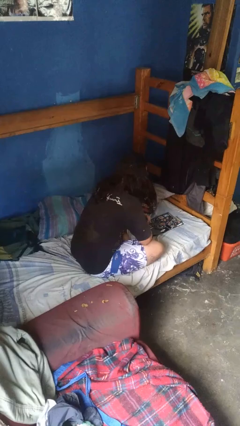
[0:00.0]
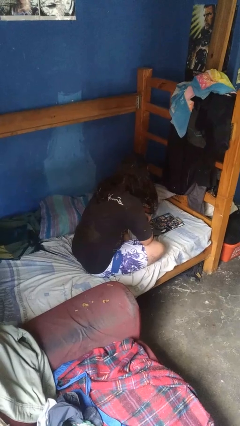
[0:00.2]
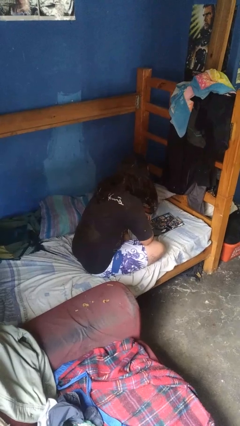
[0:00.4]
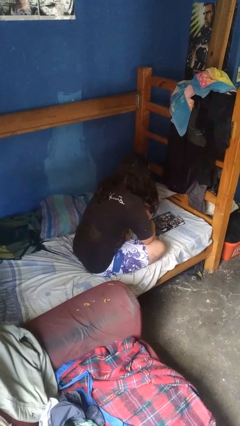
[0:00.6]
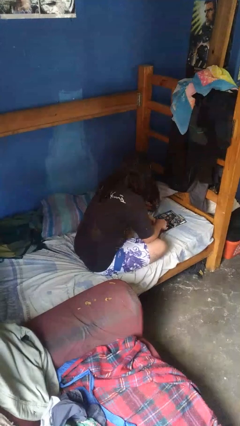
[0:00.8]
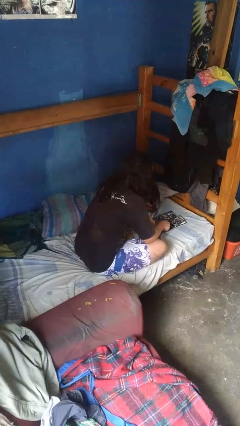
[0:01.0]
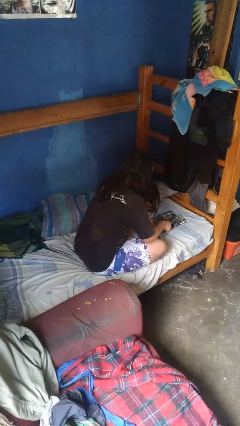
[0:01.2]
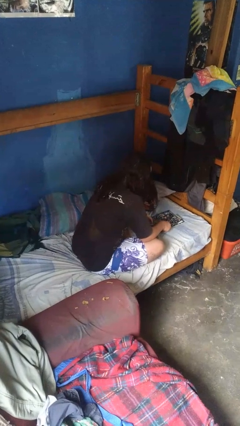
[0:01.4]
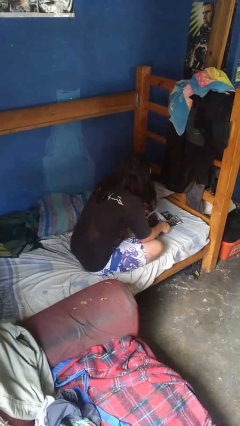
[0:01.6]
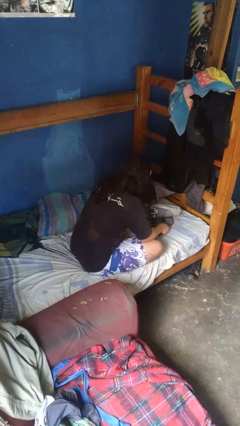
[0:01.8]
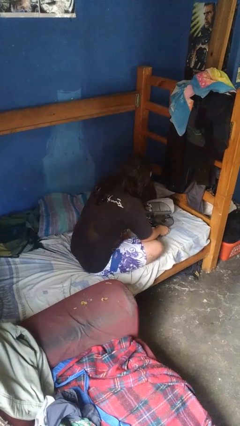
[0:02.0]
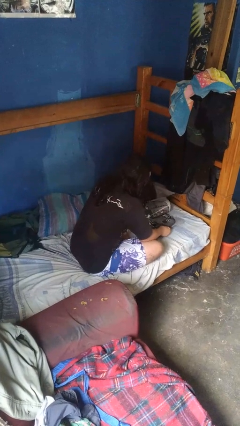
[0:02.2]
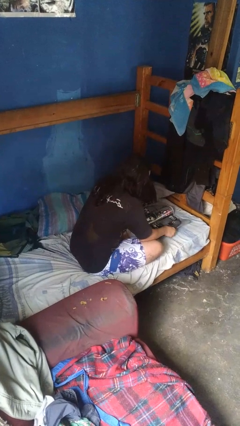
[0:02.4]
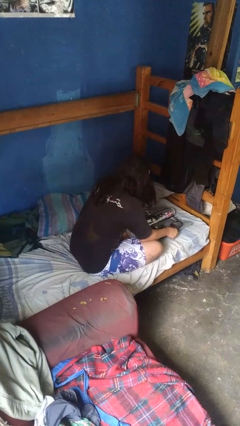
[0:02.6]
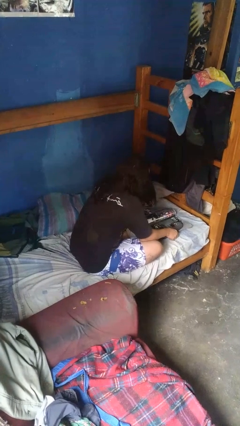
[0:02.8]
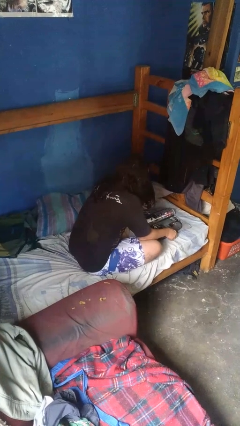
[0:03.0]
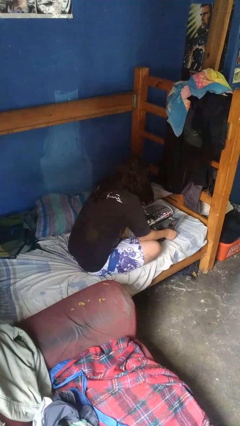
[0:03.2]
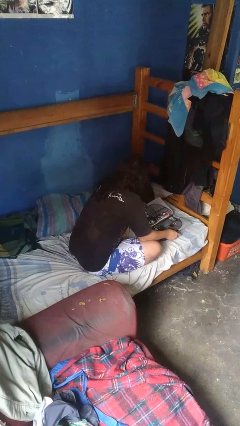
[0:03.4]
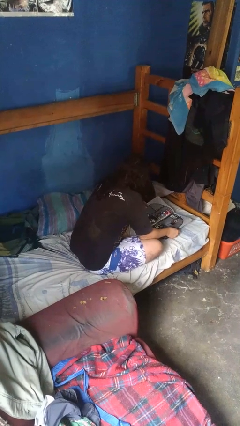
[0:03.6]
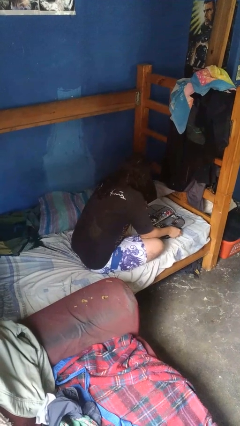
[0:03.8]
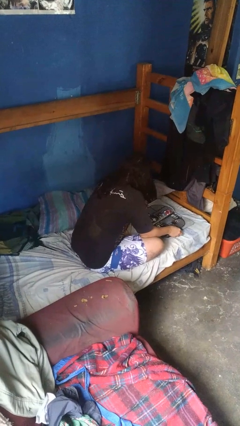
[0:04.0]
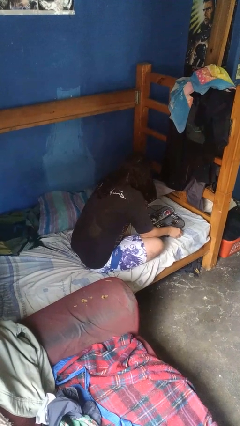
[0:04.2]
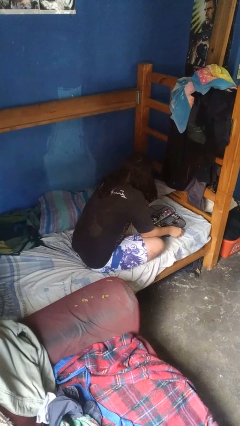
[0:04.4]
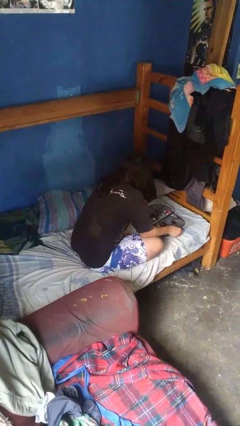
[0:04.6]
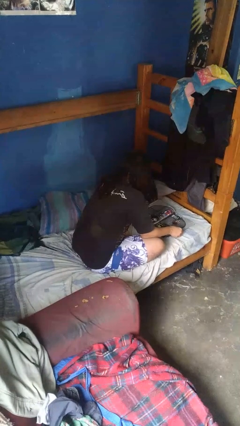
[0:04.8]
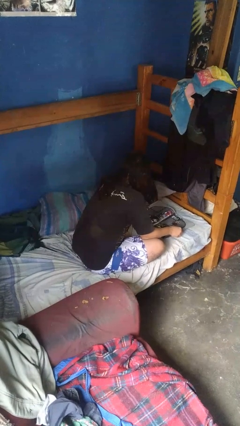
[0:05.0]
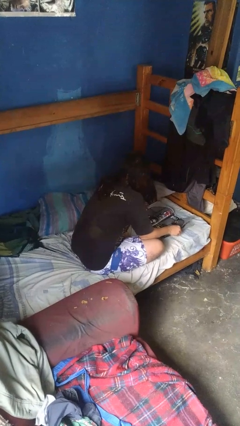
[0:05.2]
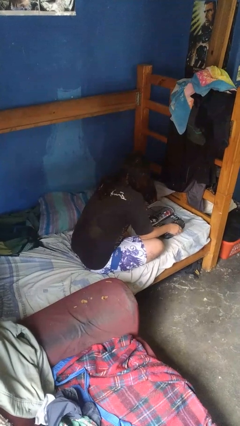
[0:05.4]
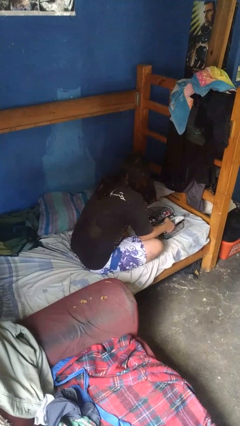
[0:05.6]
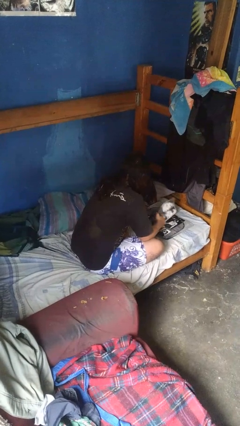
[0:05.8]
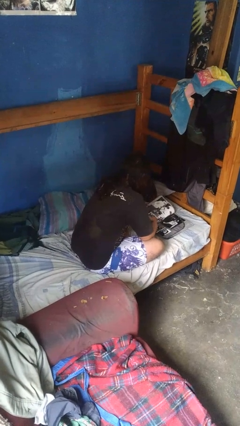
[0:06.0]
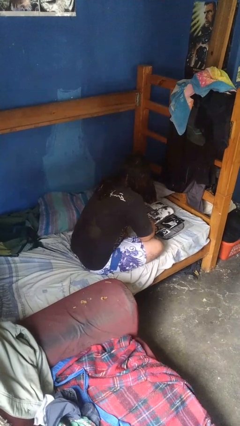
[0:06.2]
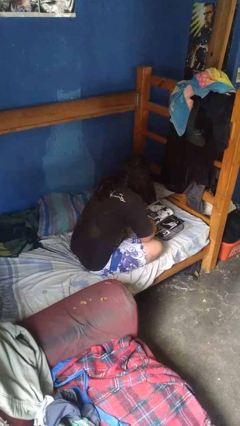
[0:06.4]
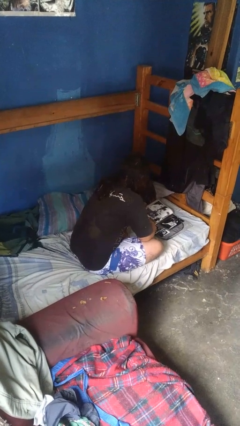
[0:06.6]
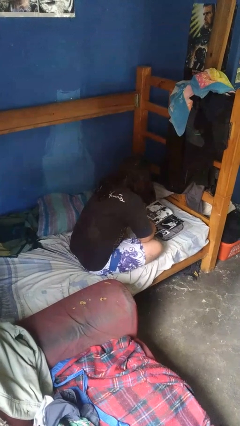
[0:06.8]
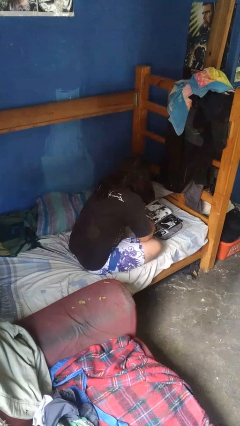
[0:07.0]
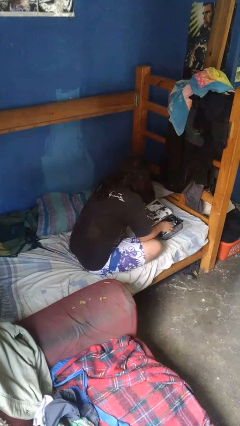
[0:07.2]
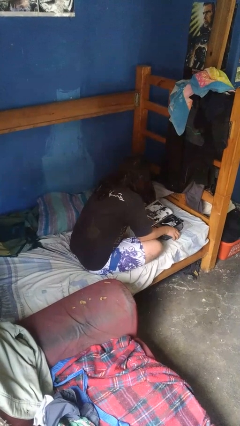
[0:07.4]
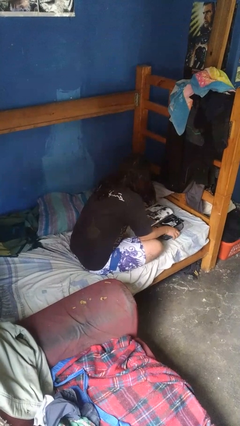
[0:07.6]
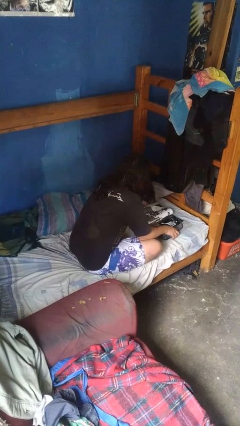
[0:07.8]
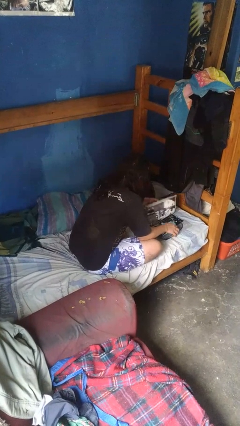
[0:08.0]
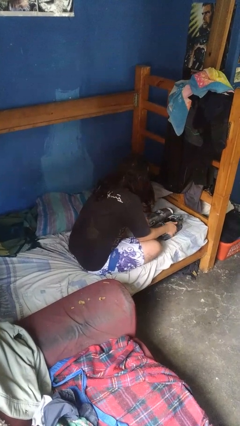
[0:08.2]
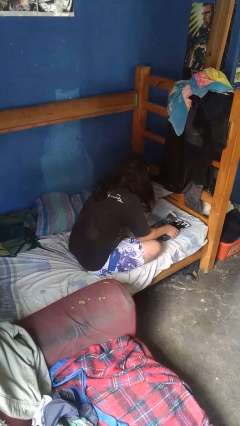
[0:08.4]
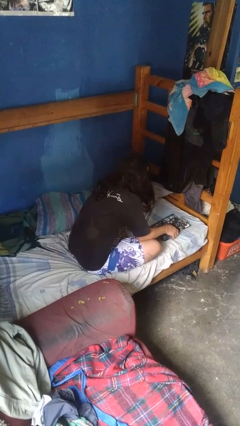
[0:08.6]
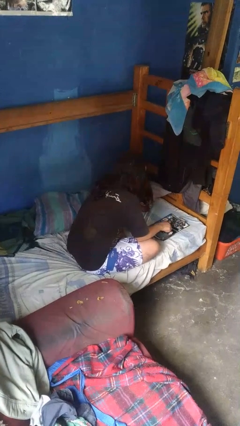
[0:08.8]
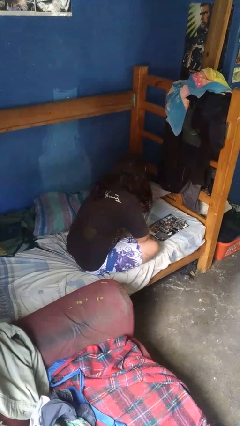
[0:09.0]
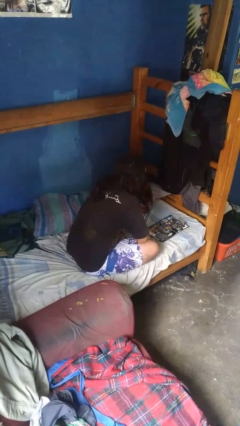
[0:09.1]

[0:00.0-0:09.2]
person reads magazine

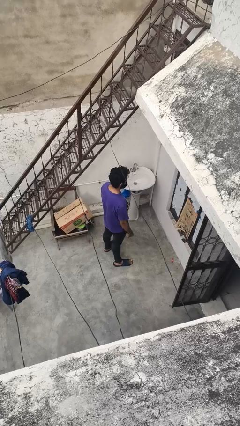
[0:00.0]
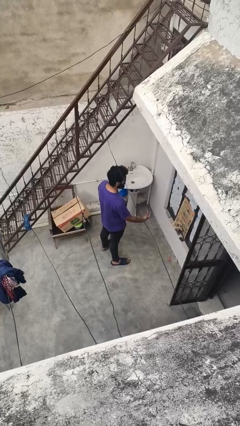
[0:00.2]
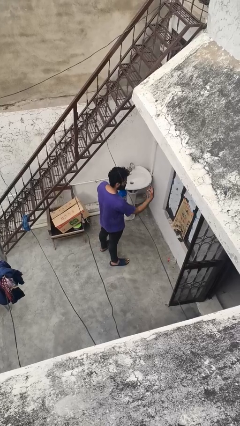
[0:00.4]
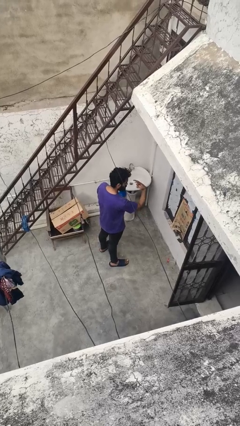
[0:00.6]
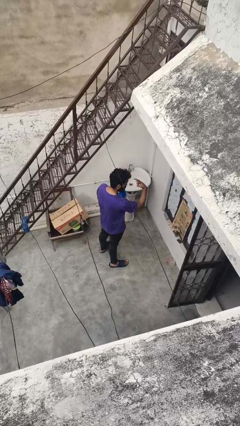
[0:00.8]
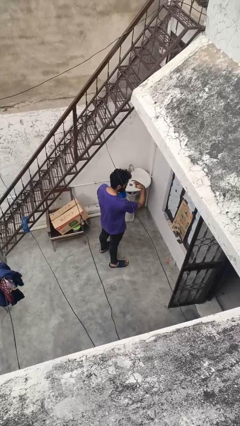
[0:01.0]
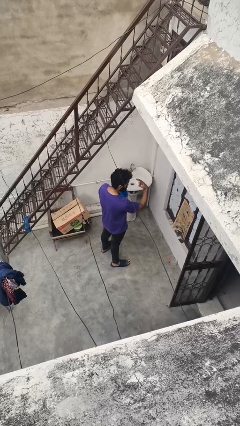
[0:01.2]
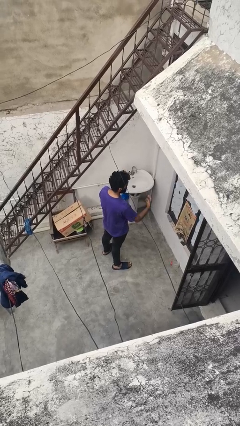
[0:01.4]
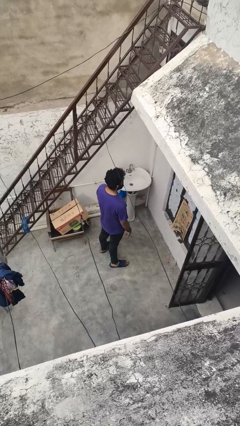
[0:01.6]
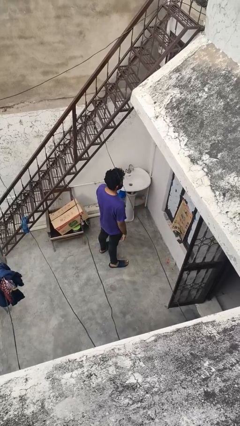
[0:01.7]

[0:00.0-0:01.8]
person gestures watch closely

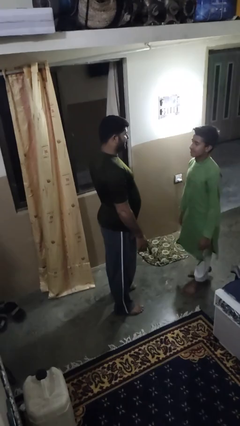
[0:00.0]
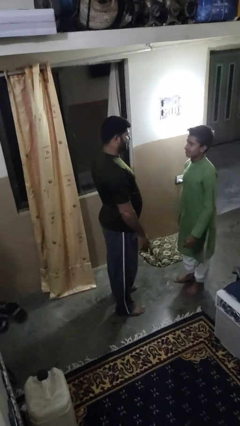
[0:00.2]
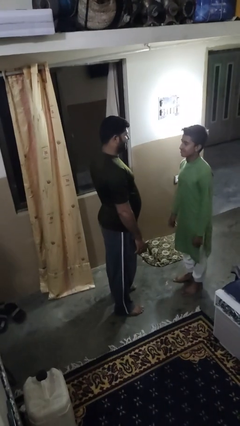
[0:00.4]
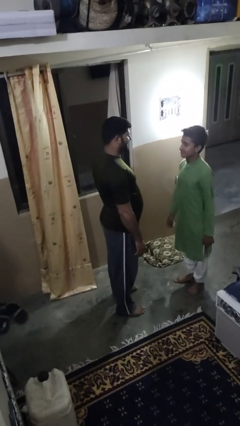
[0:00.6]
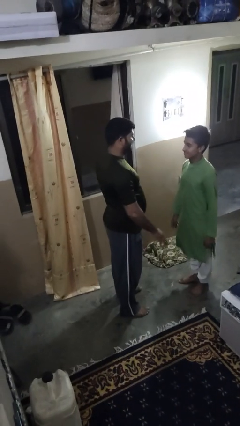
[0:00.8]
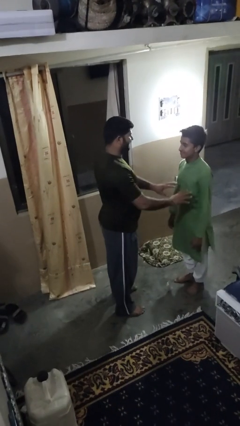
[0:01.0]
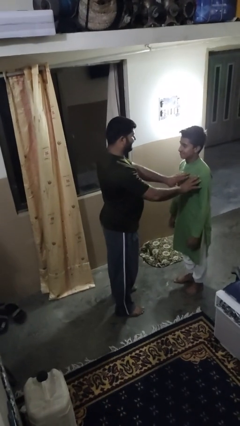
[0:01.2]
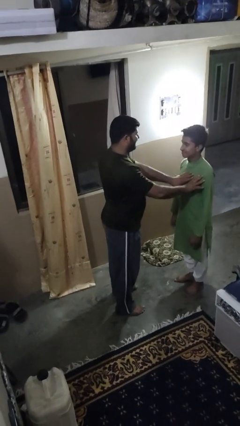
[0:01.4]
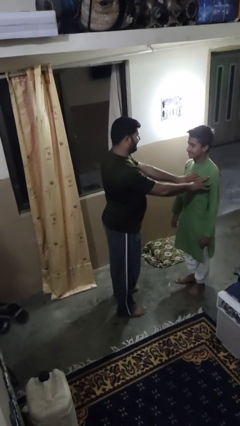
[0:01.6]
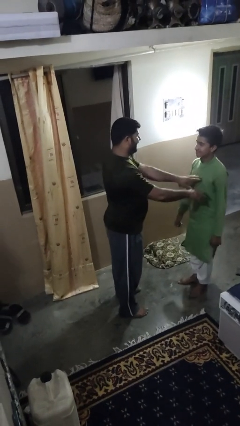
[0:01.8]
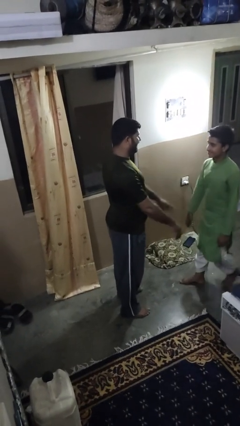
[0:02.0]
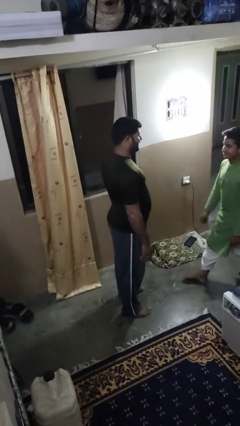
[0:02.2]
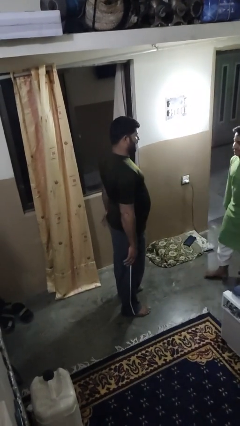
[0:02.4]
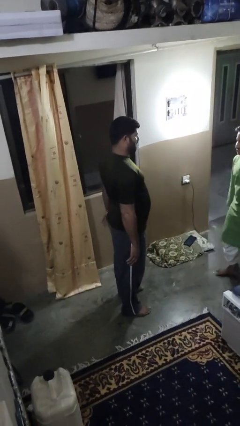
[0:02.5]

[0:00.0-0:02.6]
person shoves person

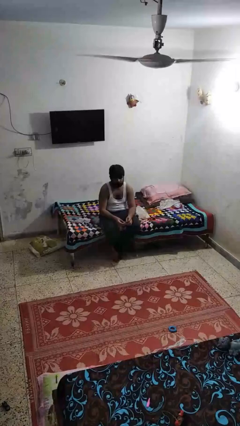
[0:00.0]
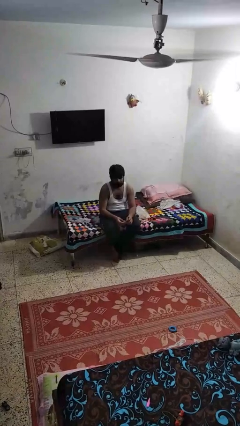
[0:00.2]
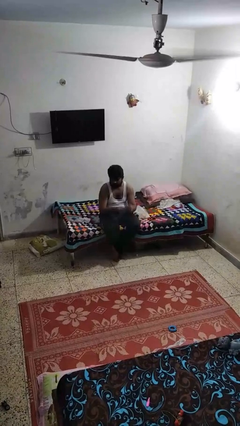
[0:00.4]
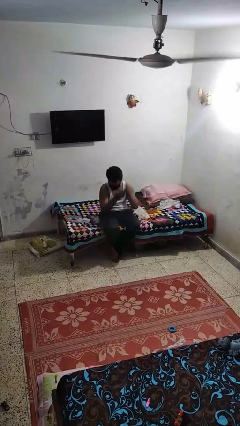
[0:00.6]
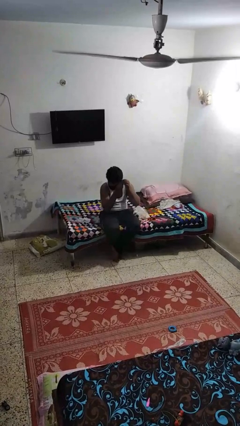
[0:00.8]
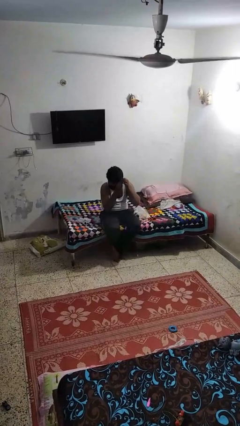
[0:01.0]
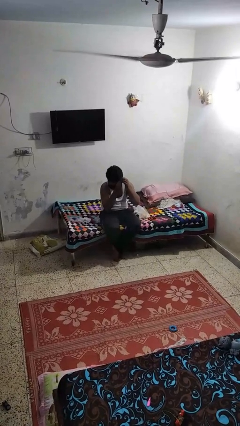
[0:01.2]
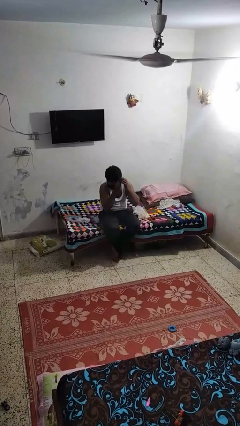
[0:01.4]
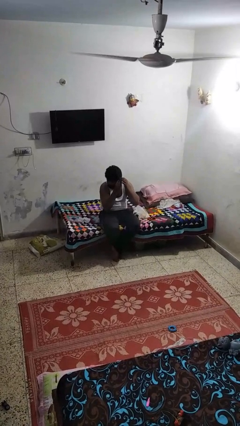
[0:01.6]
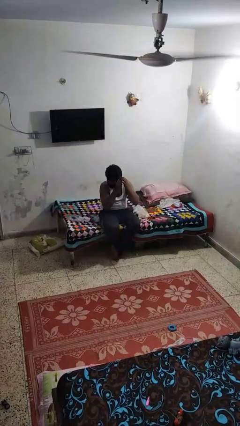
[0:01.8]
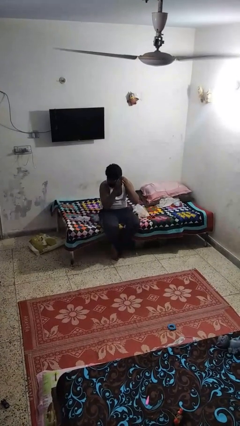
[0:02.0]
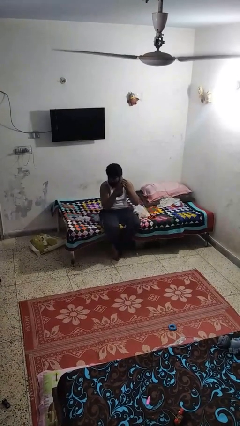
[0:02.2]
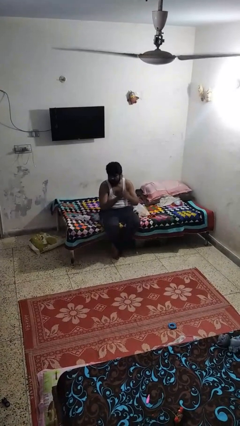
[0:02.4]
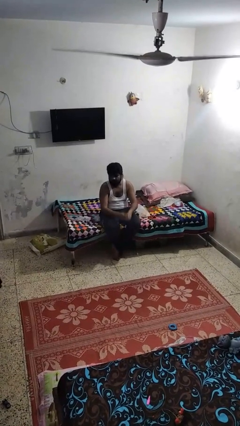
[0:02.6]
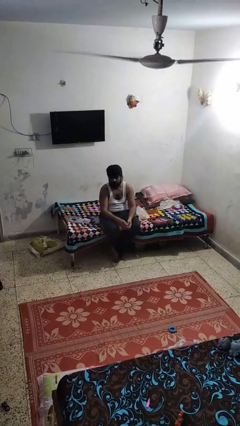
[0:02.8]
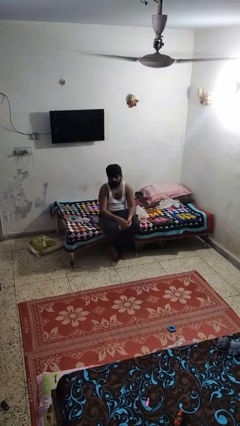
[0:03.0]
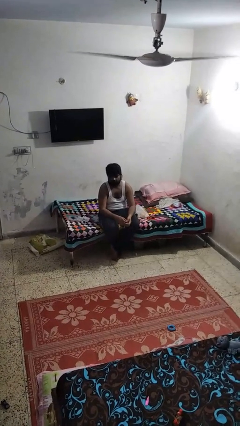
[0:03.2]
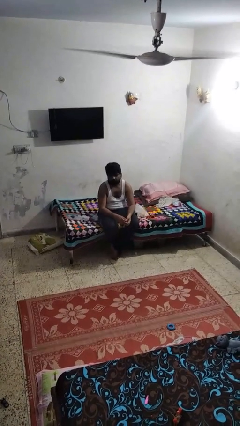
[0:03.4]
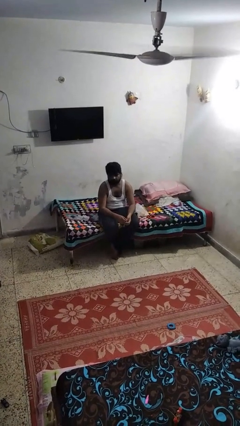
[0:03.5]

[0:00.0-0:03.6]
person puts on earrings

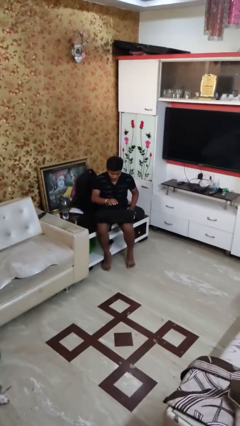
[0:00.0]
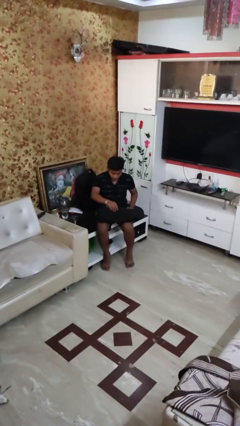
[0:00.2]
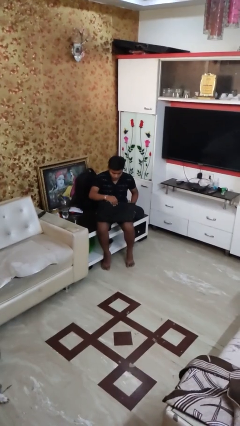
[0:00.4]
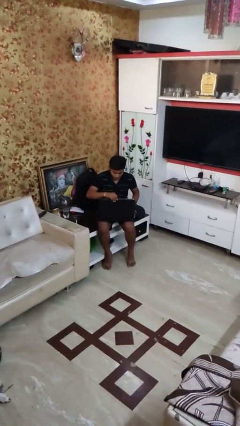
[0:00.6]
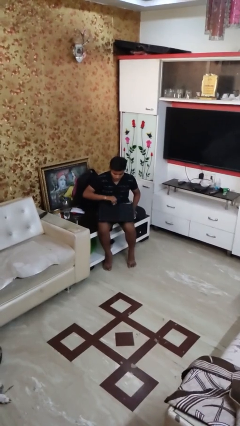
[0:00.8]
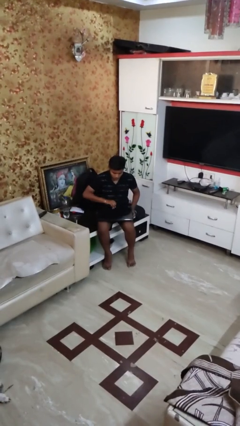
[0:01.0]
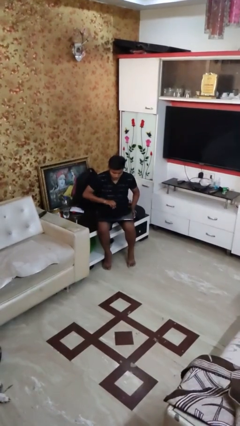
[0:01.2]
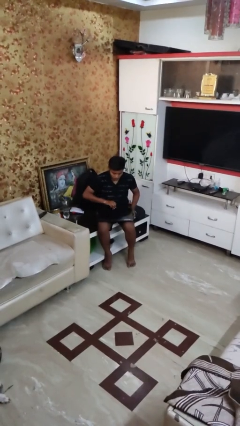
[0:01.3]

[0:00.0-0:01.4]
person closes laptop
